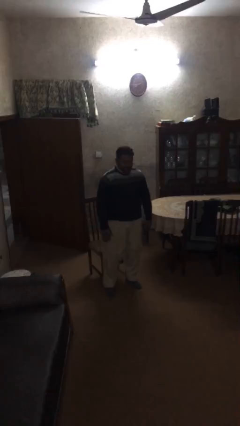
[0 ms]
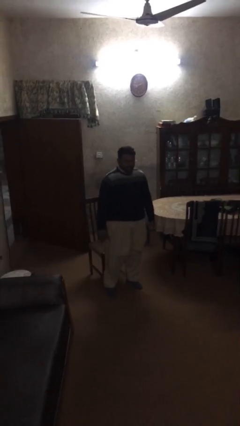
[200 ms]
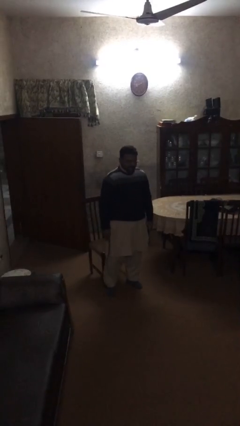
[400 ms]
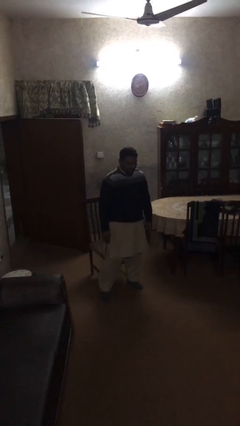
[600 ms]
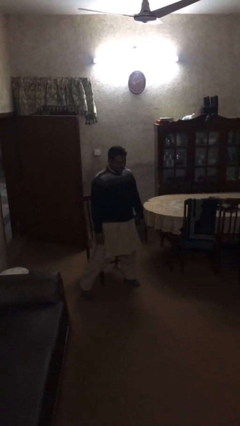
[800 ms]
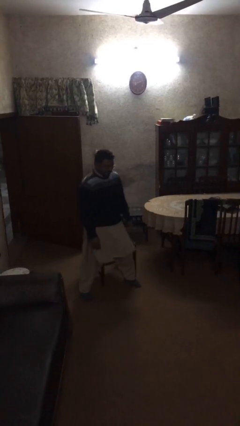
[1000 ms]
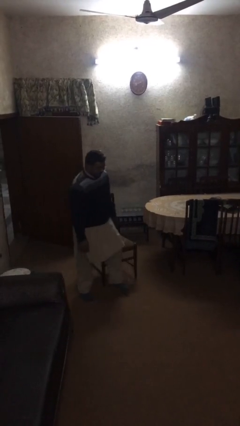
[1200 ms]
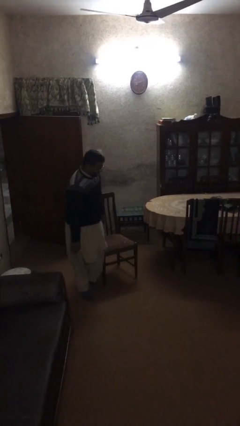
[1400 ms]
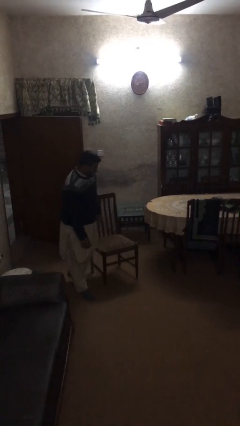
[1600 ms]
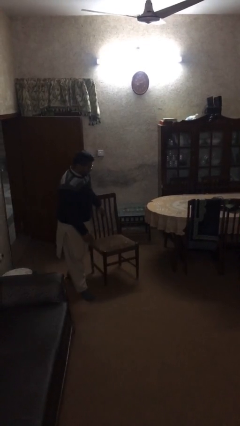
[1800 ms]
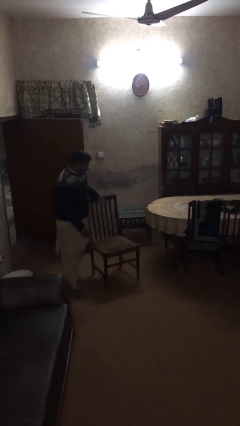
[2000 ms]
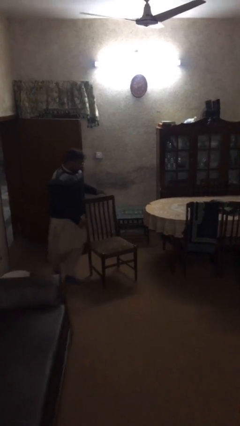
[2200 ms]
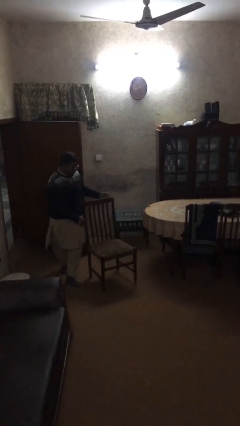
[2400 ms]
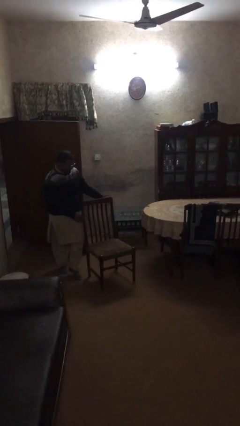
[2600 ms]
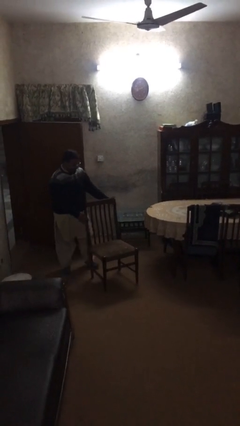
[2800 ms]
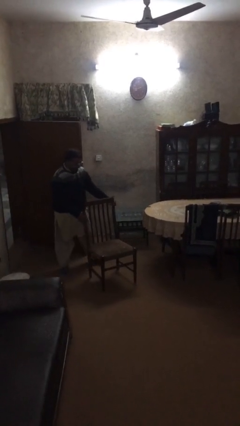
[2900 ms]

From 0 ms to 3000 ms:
person stands up

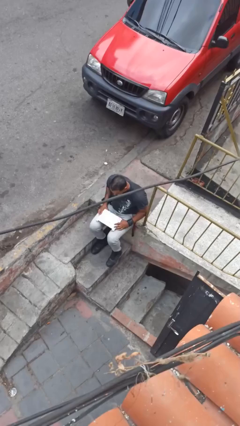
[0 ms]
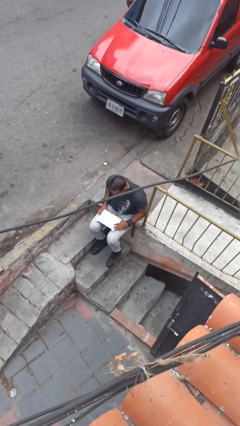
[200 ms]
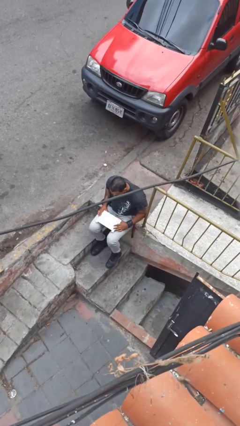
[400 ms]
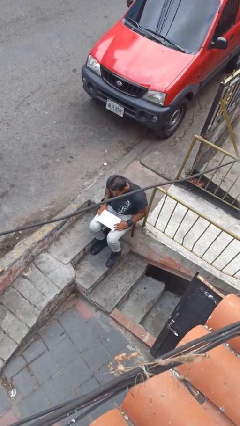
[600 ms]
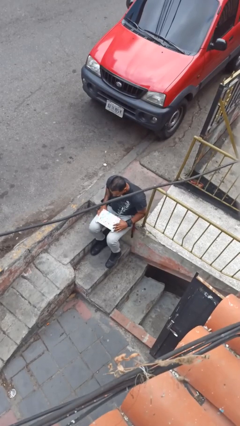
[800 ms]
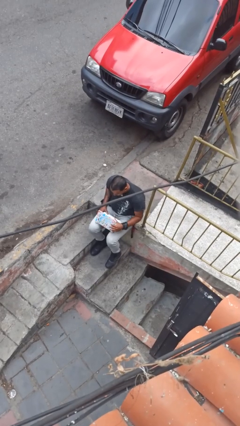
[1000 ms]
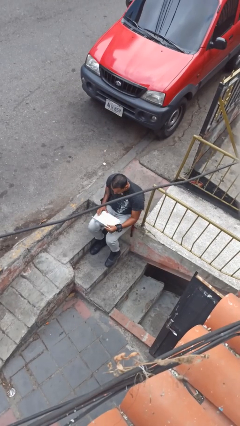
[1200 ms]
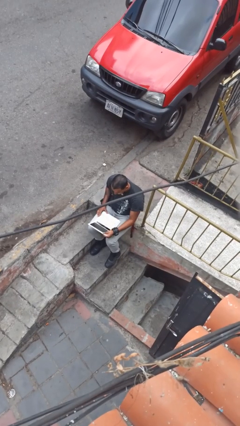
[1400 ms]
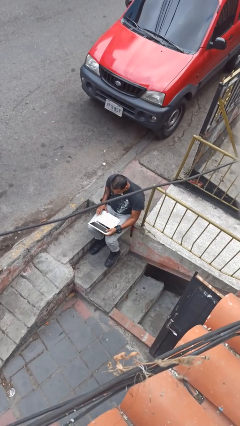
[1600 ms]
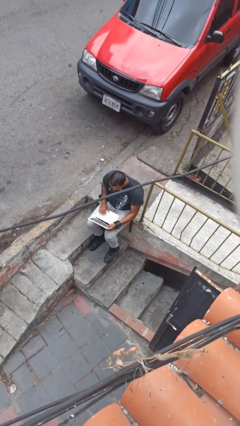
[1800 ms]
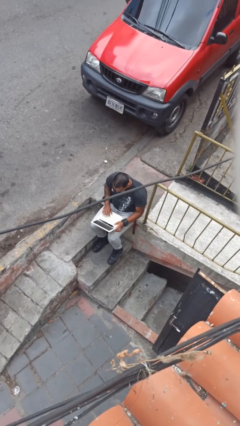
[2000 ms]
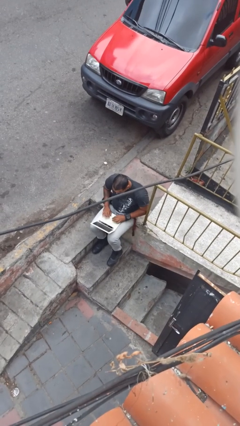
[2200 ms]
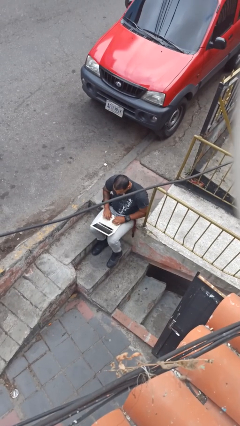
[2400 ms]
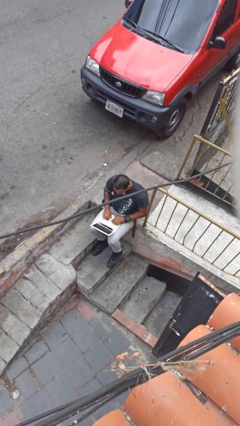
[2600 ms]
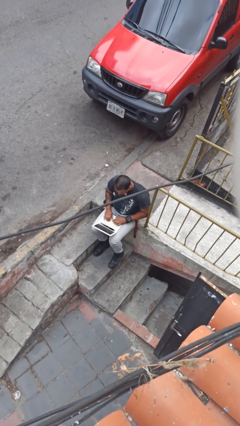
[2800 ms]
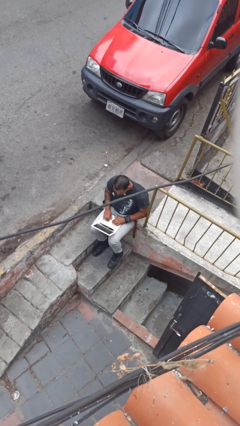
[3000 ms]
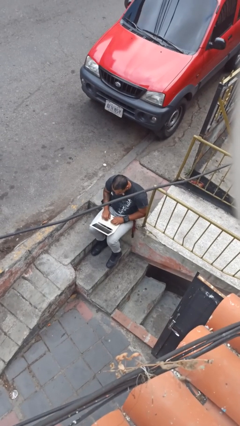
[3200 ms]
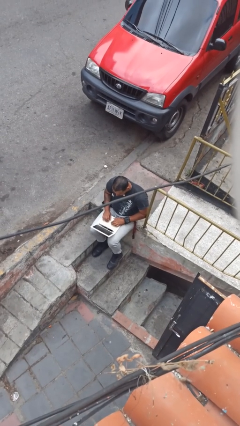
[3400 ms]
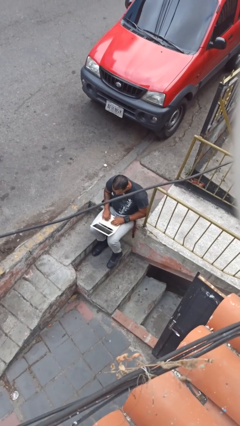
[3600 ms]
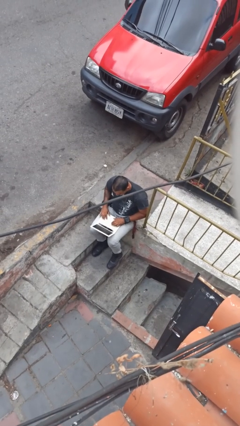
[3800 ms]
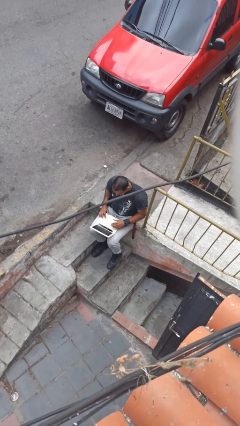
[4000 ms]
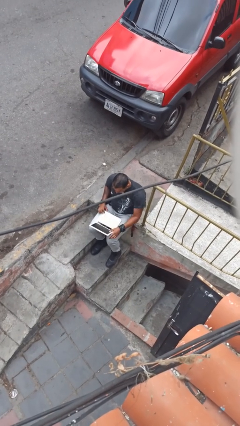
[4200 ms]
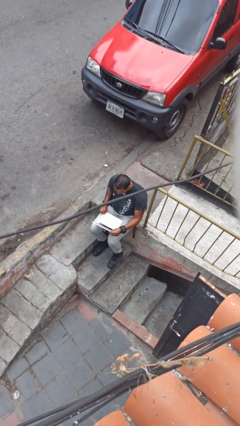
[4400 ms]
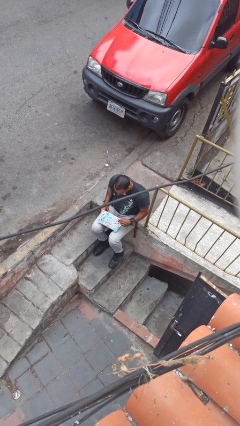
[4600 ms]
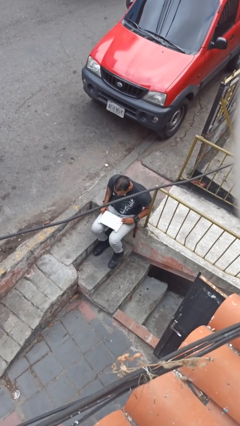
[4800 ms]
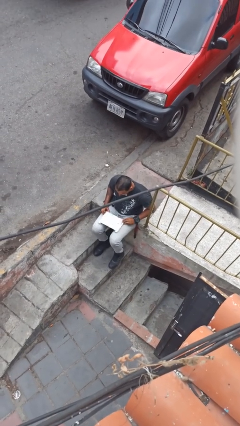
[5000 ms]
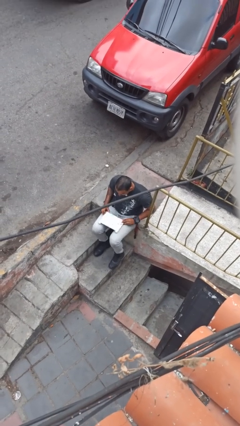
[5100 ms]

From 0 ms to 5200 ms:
person interacts with laptop

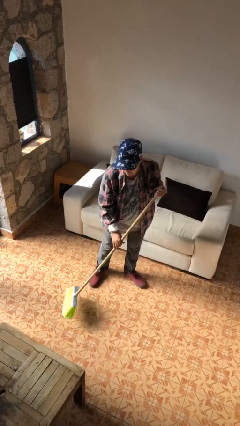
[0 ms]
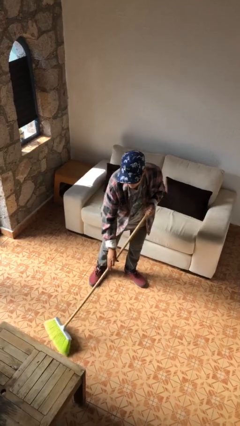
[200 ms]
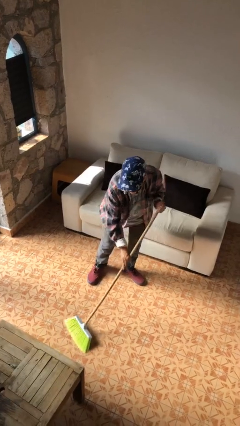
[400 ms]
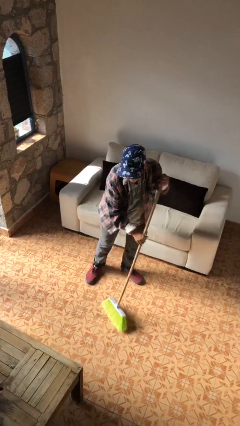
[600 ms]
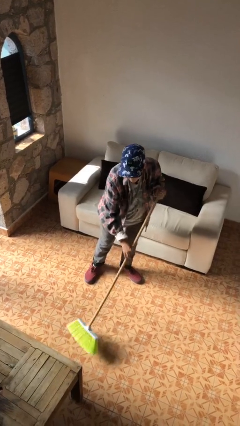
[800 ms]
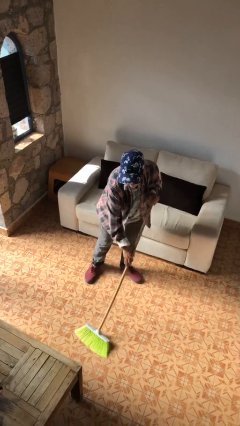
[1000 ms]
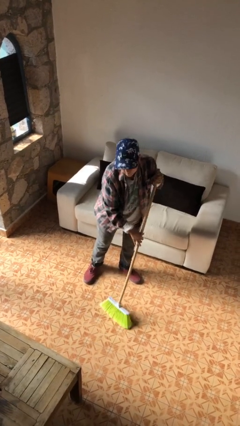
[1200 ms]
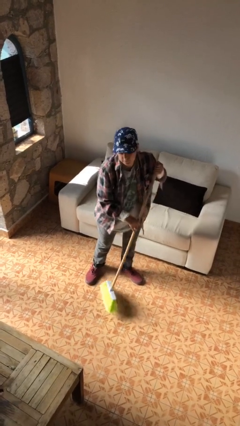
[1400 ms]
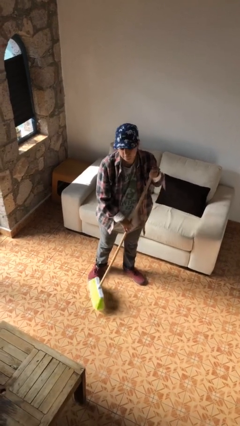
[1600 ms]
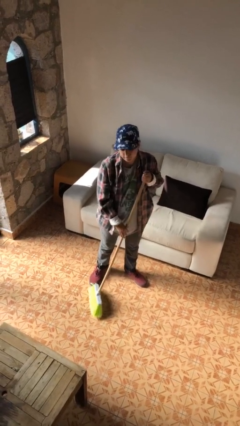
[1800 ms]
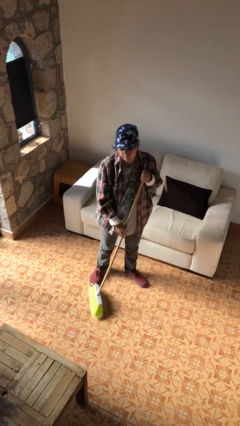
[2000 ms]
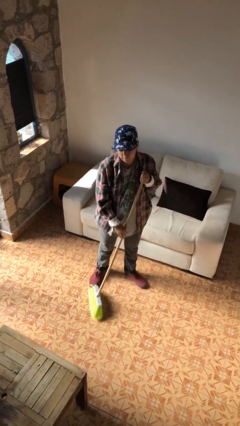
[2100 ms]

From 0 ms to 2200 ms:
person sweeps floor

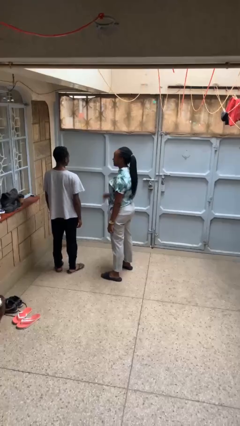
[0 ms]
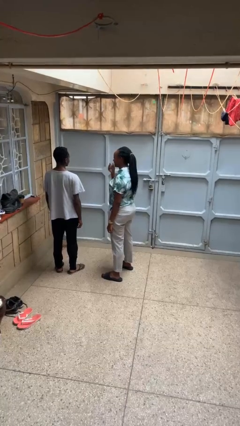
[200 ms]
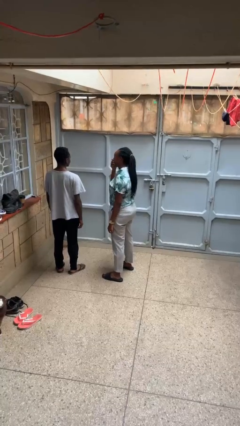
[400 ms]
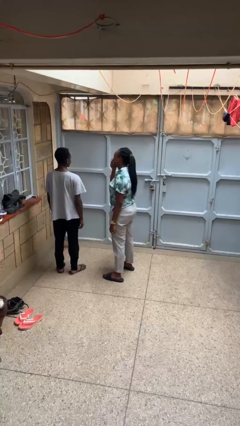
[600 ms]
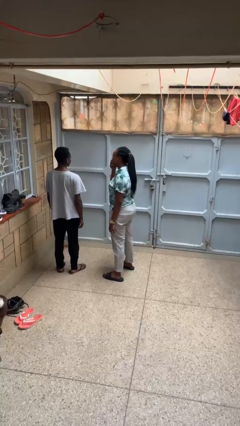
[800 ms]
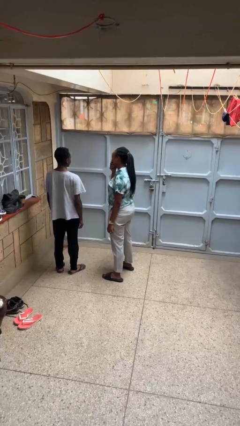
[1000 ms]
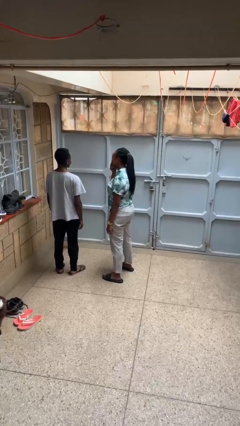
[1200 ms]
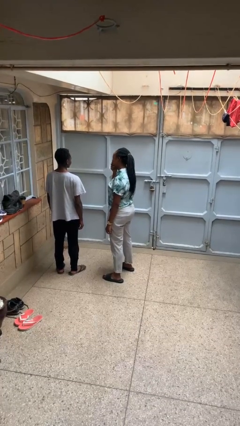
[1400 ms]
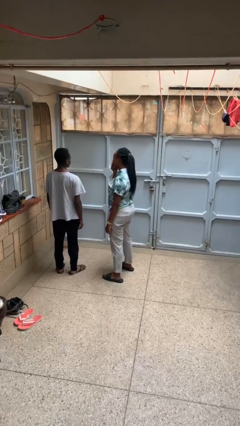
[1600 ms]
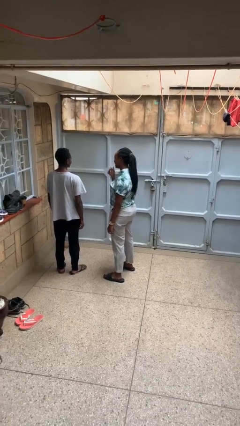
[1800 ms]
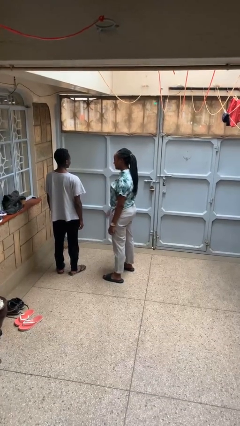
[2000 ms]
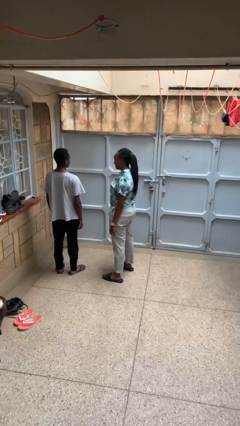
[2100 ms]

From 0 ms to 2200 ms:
person laughs with person

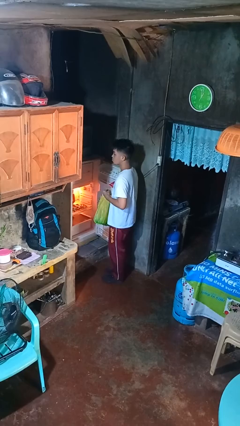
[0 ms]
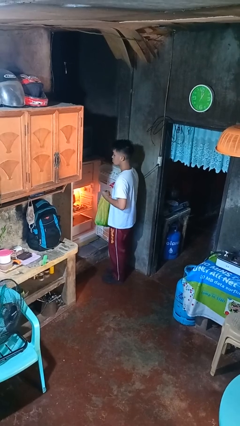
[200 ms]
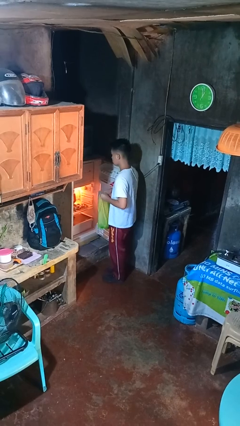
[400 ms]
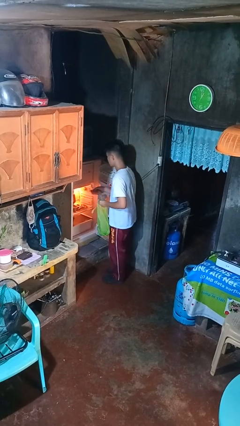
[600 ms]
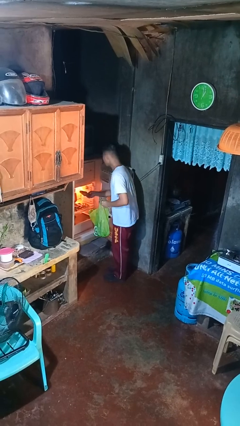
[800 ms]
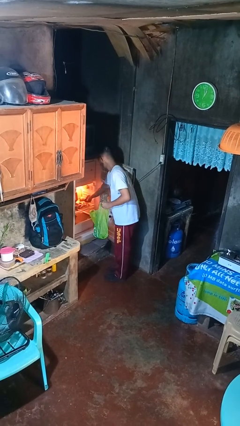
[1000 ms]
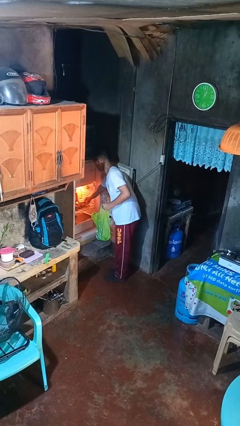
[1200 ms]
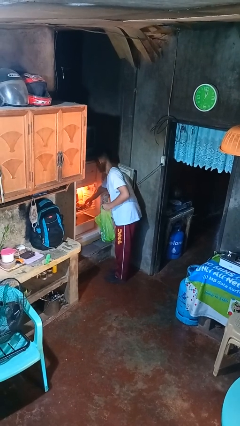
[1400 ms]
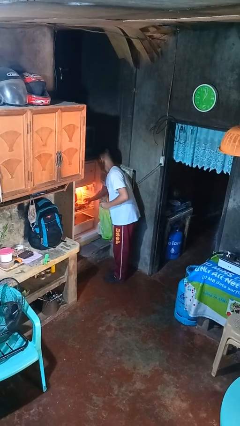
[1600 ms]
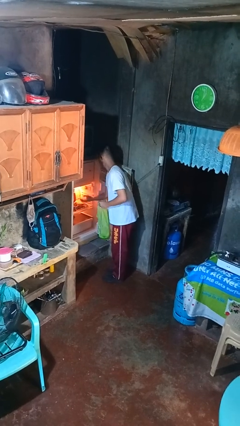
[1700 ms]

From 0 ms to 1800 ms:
person loads groceries into refrigerator

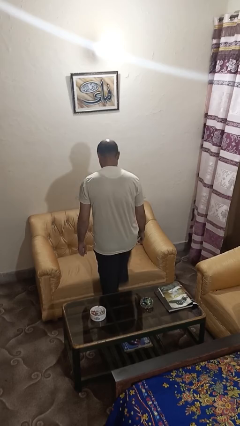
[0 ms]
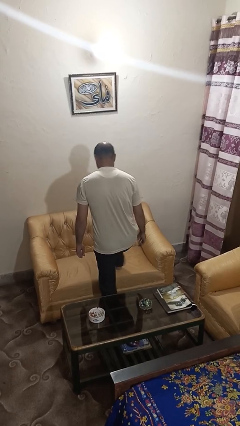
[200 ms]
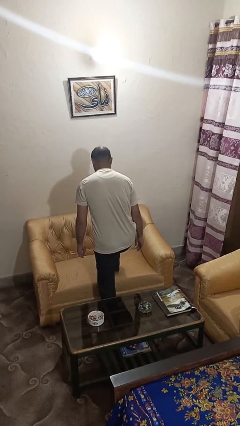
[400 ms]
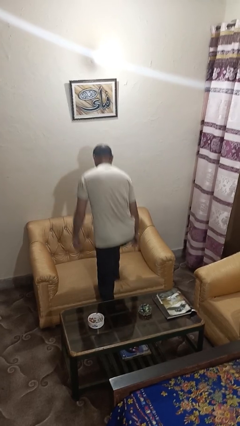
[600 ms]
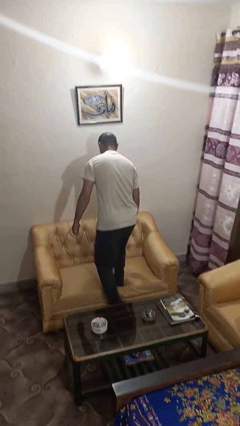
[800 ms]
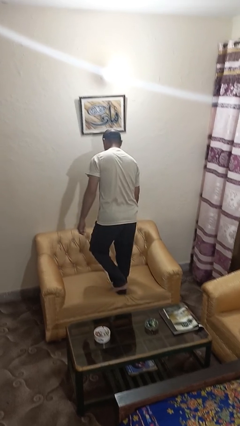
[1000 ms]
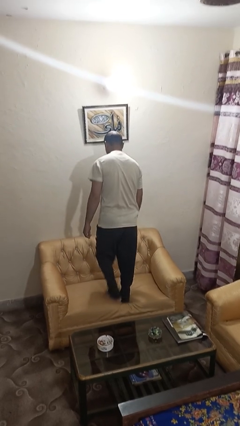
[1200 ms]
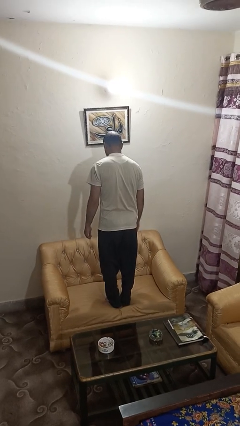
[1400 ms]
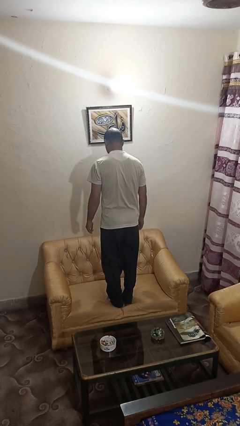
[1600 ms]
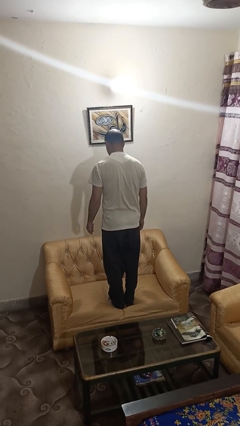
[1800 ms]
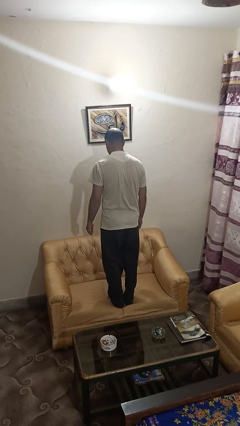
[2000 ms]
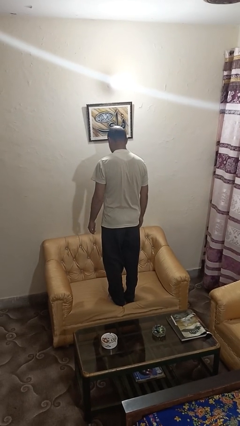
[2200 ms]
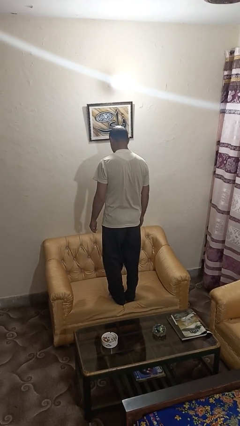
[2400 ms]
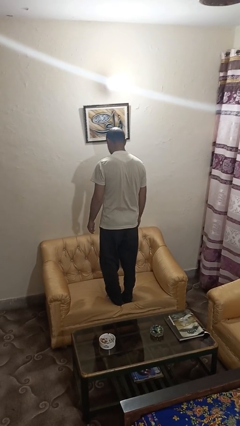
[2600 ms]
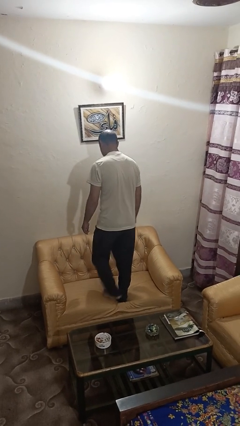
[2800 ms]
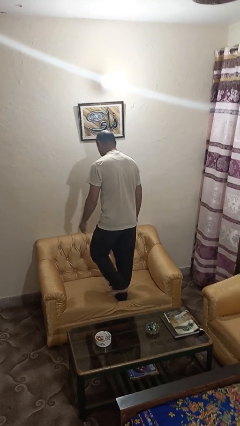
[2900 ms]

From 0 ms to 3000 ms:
person climbs on couch

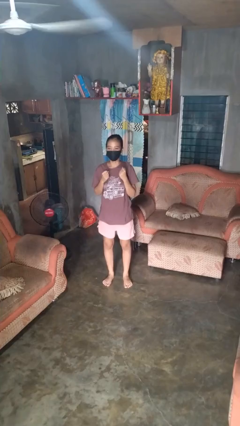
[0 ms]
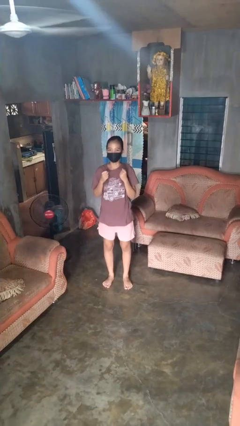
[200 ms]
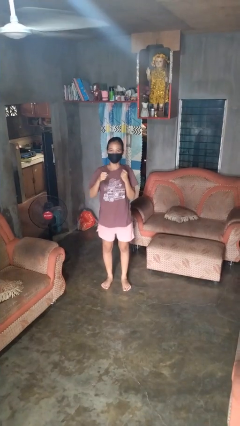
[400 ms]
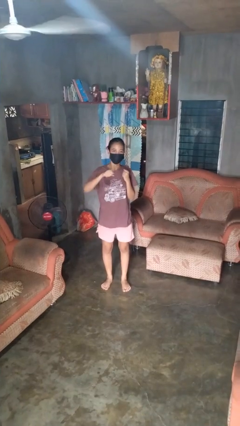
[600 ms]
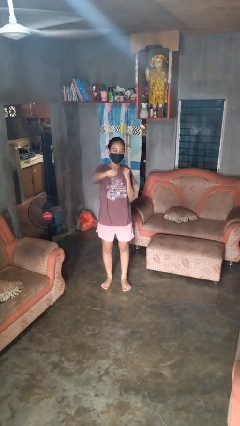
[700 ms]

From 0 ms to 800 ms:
person punches
